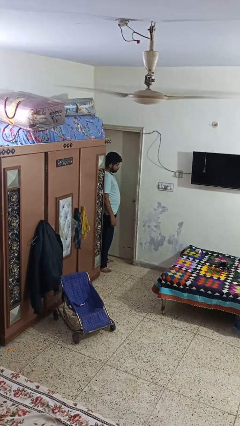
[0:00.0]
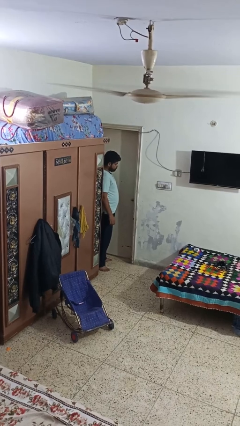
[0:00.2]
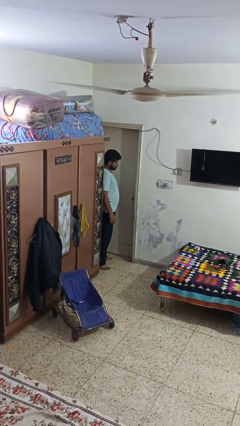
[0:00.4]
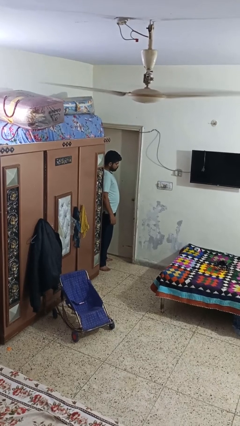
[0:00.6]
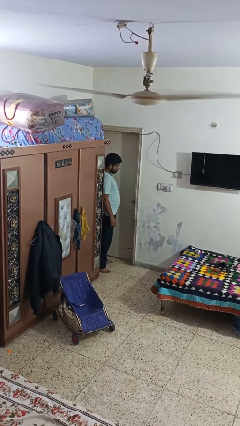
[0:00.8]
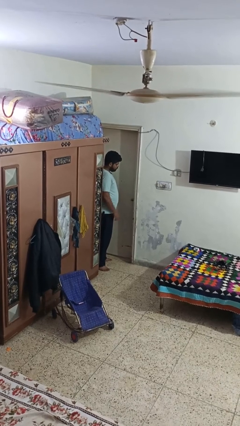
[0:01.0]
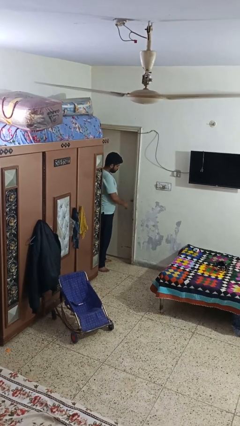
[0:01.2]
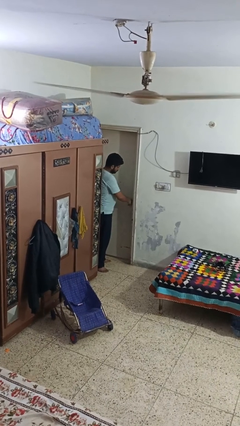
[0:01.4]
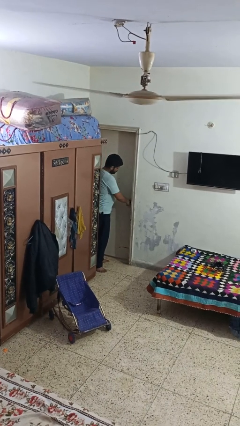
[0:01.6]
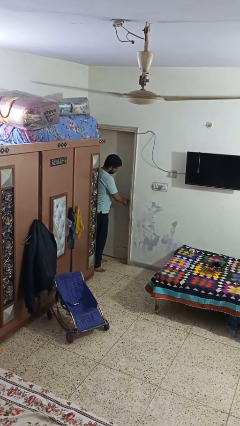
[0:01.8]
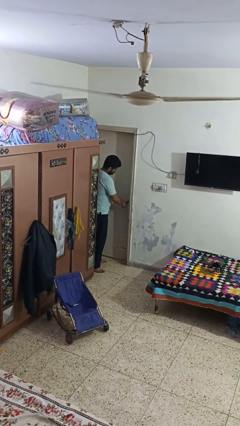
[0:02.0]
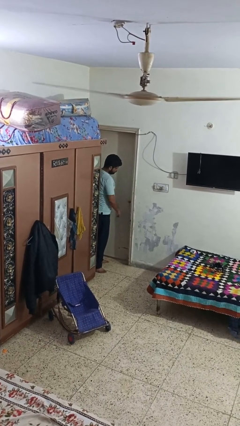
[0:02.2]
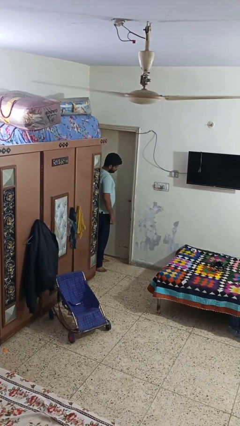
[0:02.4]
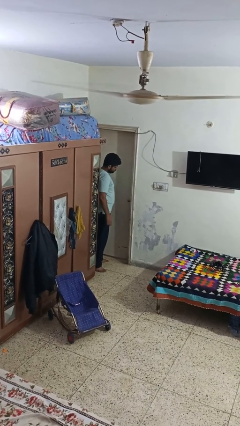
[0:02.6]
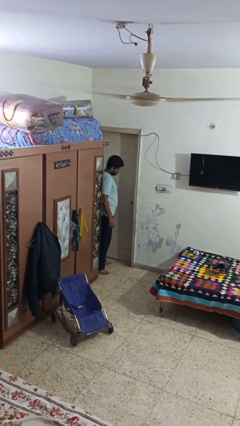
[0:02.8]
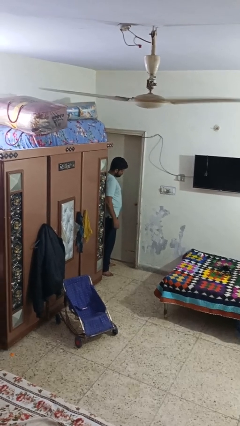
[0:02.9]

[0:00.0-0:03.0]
person unlocks door with keys

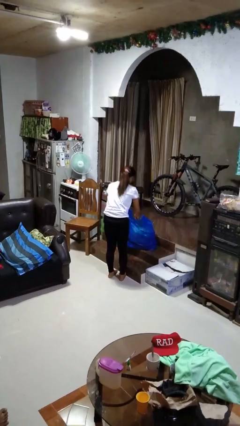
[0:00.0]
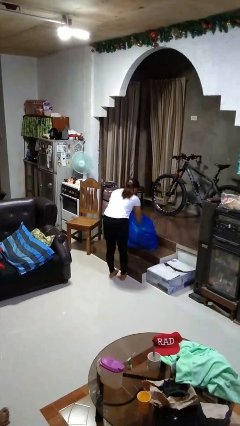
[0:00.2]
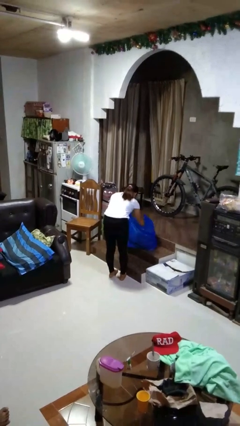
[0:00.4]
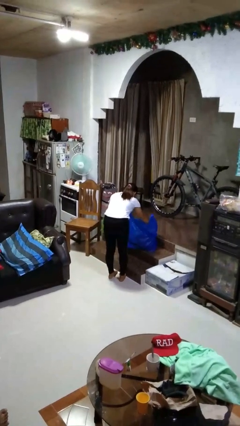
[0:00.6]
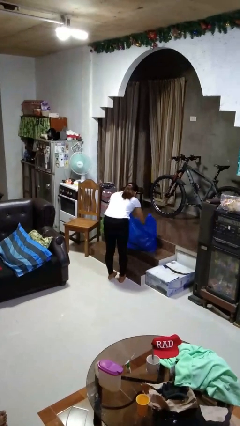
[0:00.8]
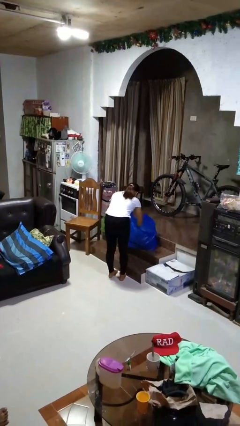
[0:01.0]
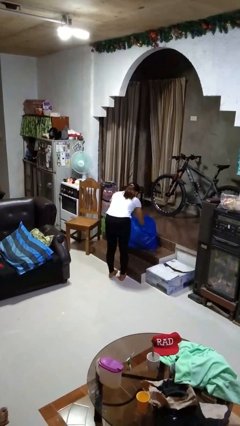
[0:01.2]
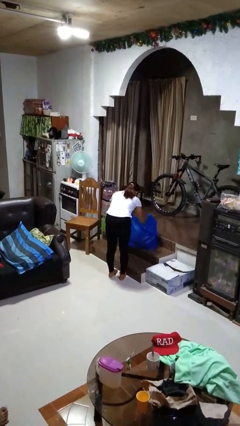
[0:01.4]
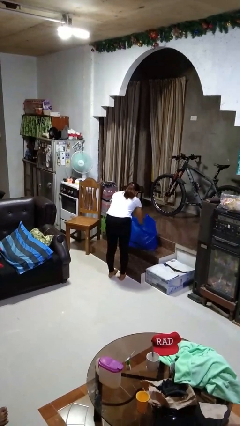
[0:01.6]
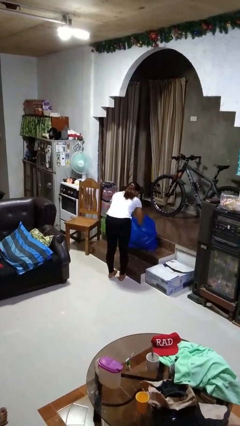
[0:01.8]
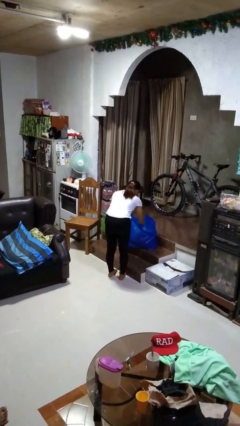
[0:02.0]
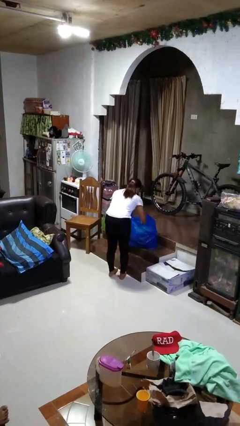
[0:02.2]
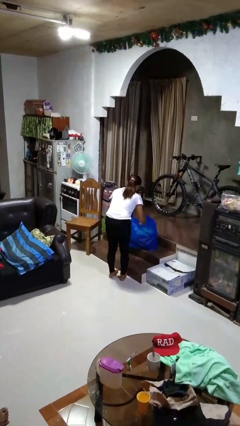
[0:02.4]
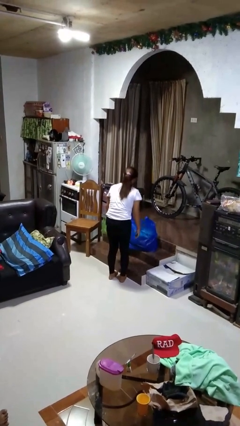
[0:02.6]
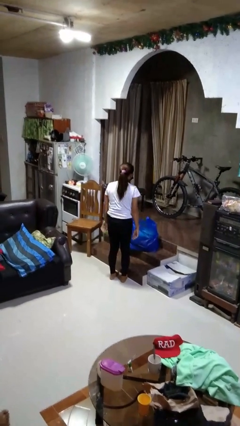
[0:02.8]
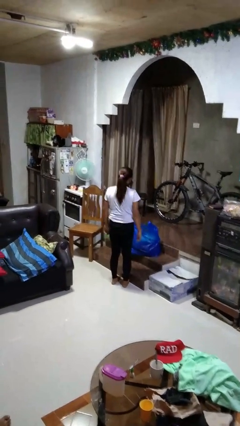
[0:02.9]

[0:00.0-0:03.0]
person searches in bag

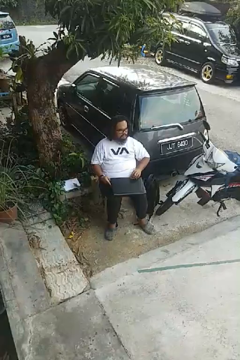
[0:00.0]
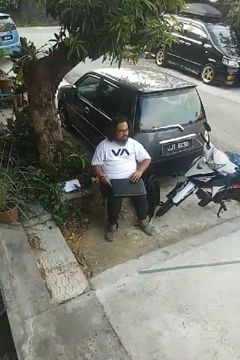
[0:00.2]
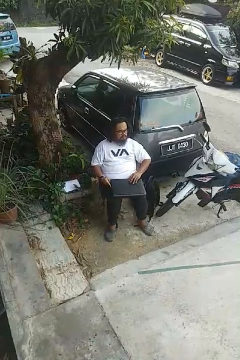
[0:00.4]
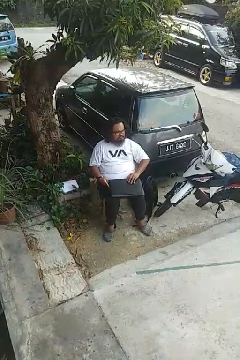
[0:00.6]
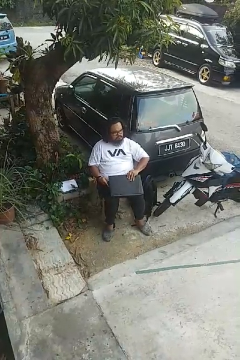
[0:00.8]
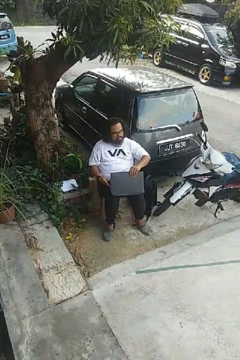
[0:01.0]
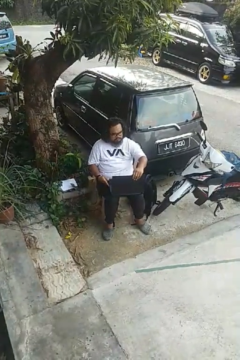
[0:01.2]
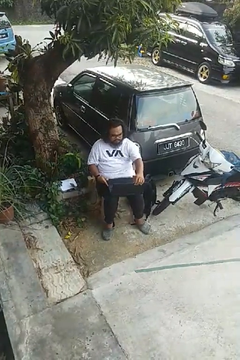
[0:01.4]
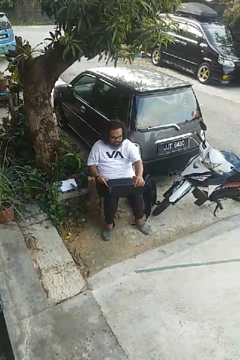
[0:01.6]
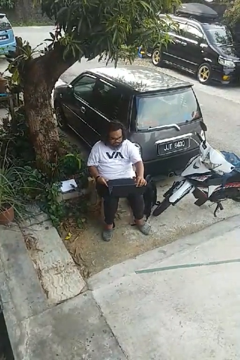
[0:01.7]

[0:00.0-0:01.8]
person opens laptop

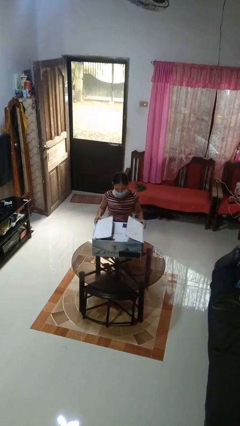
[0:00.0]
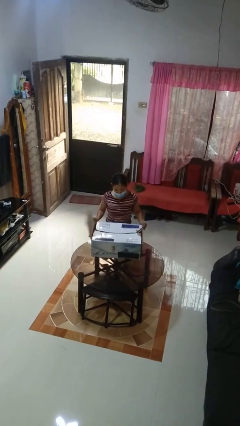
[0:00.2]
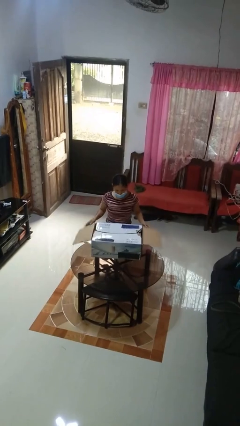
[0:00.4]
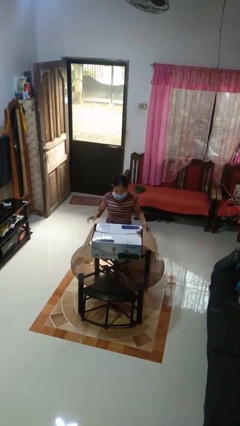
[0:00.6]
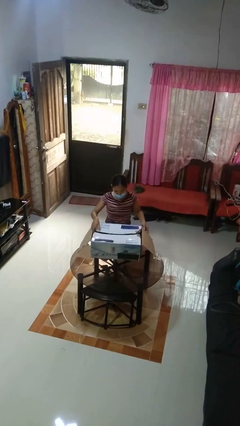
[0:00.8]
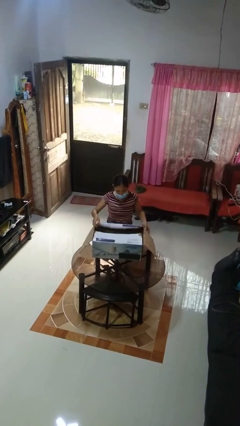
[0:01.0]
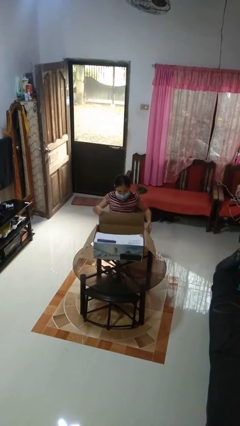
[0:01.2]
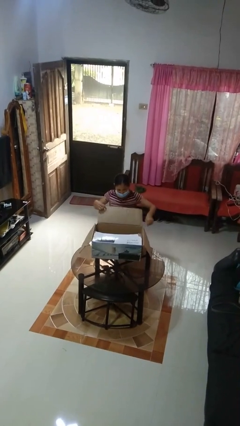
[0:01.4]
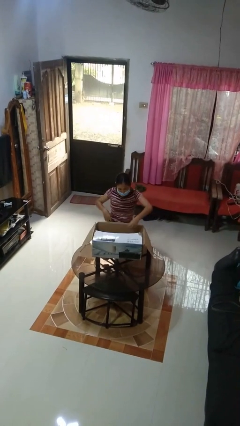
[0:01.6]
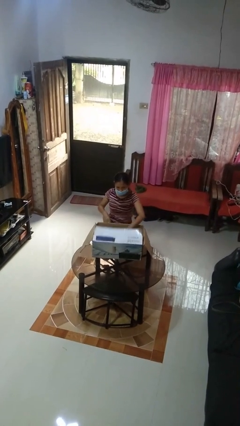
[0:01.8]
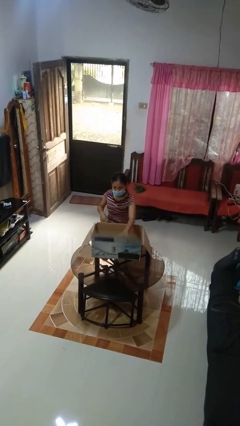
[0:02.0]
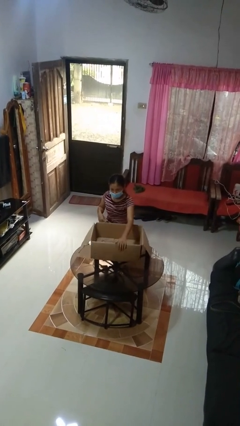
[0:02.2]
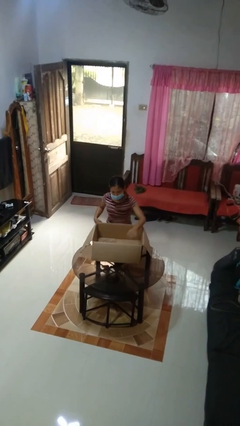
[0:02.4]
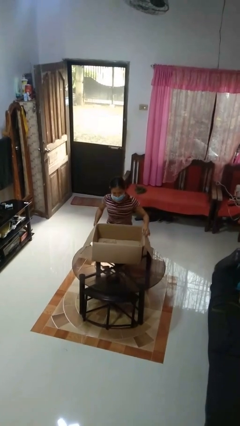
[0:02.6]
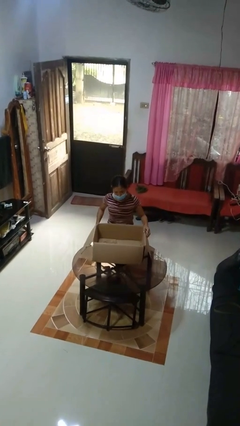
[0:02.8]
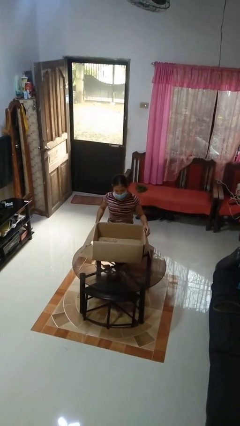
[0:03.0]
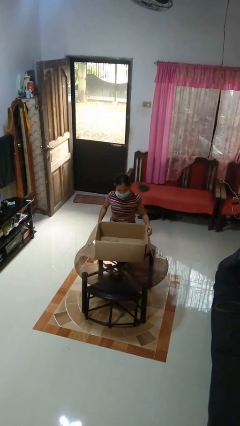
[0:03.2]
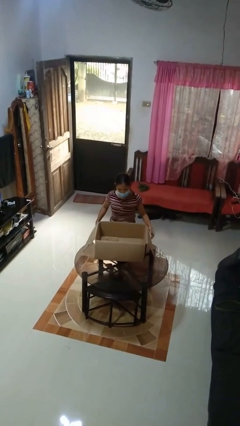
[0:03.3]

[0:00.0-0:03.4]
person opens box

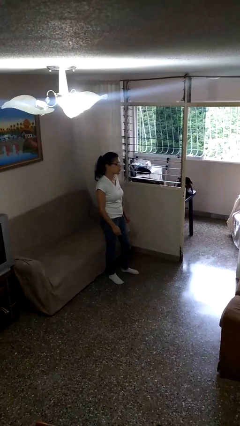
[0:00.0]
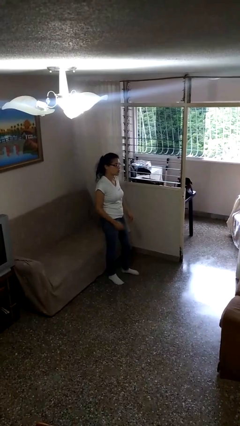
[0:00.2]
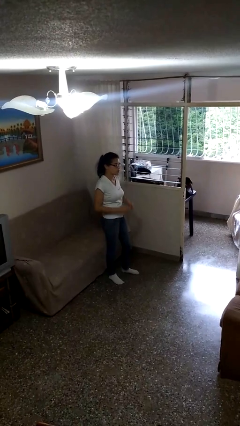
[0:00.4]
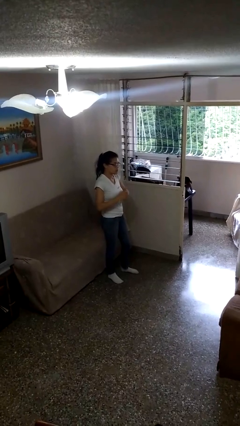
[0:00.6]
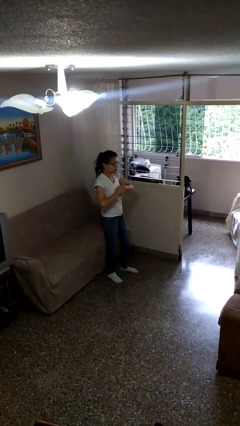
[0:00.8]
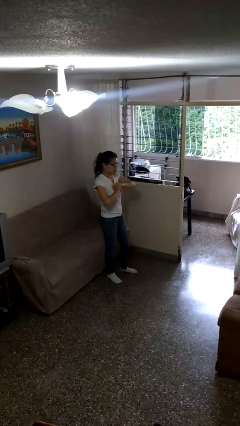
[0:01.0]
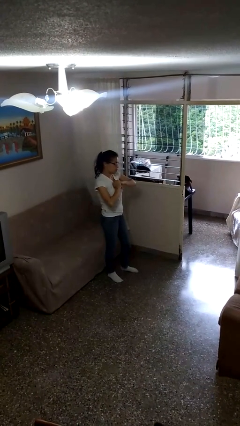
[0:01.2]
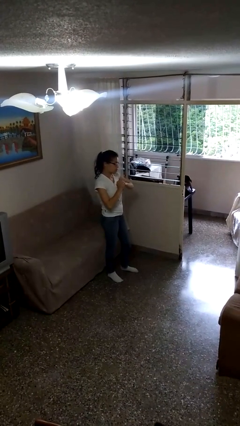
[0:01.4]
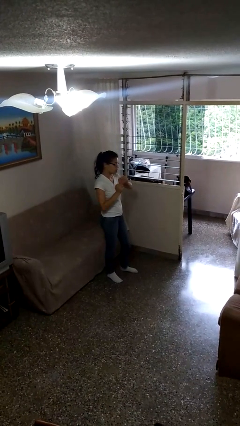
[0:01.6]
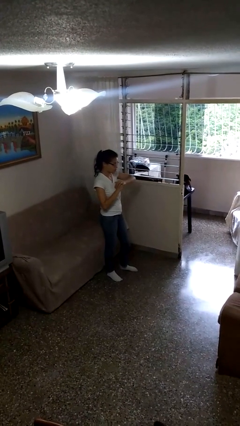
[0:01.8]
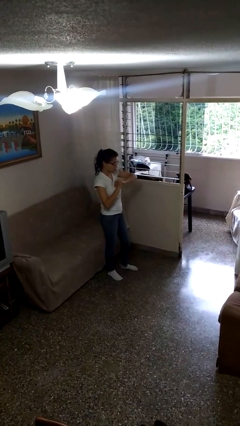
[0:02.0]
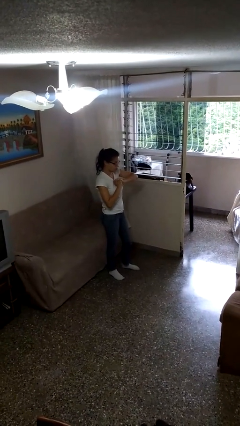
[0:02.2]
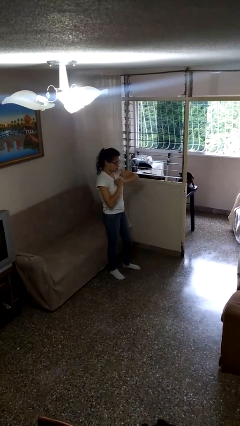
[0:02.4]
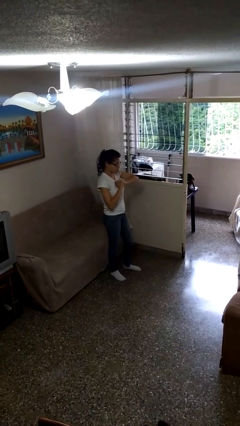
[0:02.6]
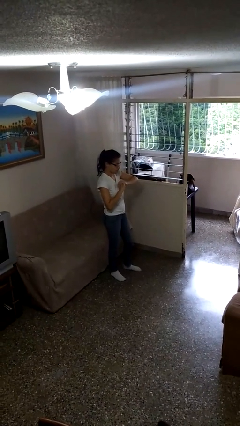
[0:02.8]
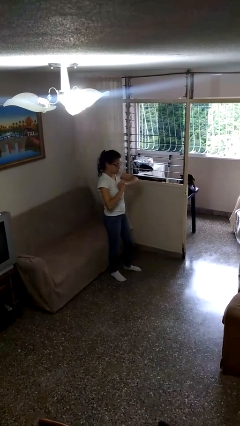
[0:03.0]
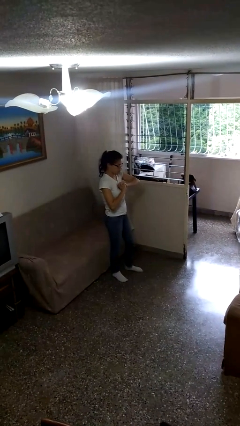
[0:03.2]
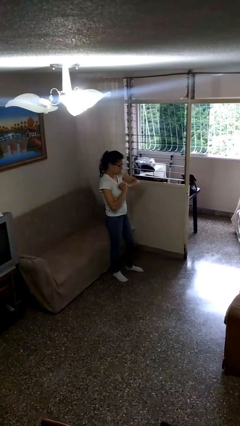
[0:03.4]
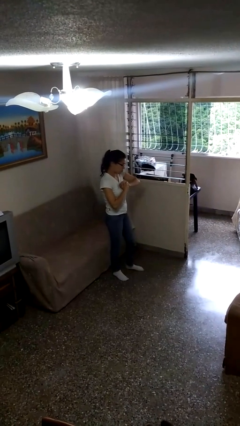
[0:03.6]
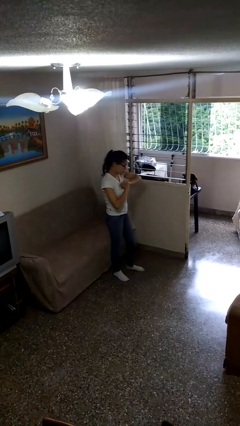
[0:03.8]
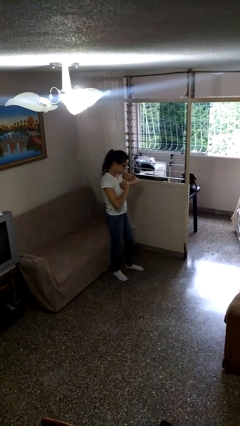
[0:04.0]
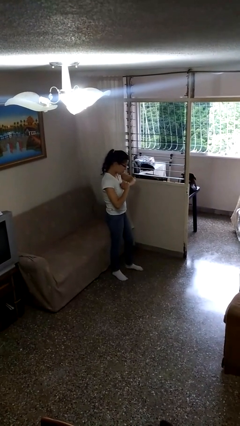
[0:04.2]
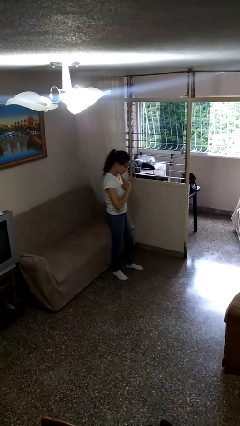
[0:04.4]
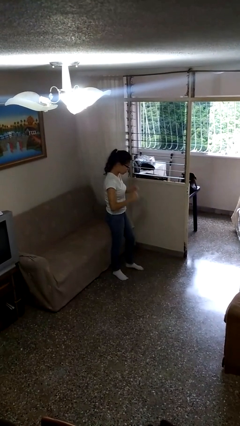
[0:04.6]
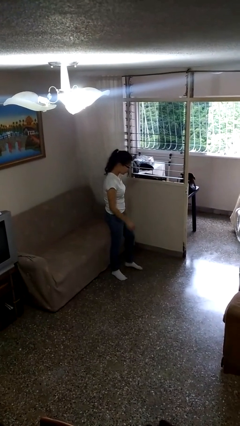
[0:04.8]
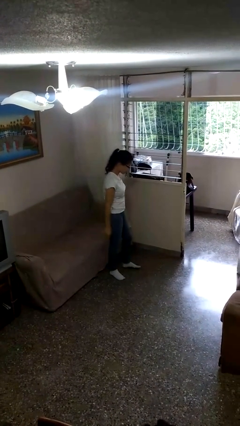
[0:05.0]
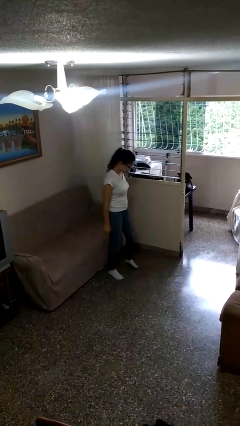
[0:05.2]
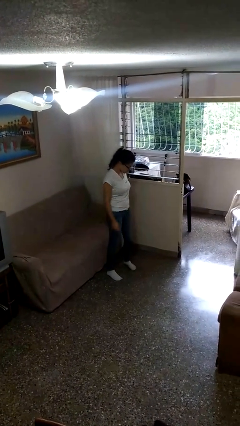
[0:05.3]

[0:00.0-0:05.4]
person cracks knuckles

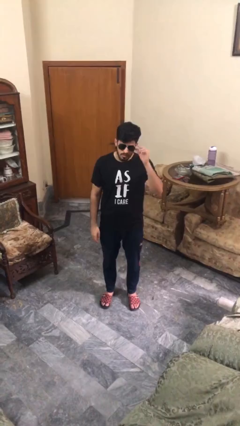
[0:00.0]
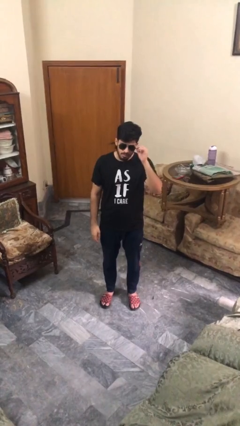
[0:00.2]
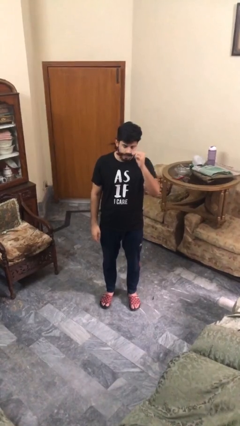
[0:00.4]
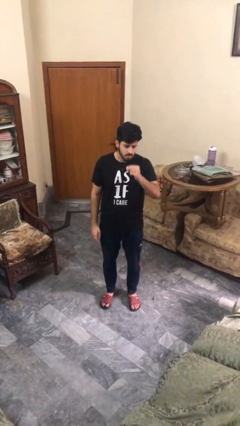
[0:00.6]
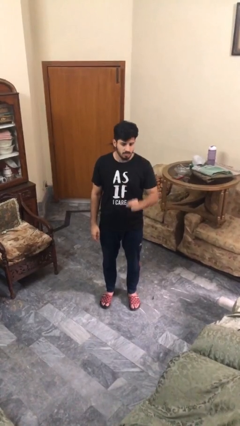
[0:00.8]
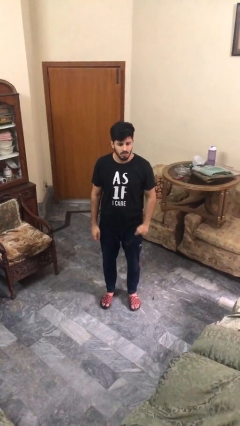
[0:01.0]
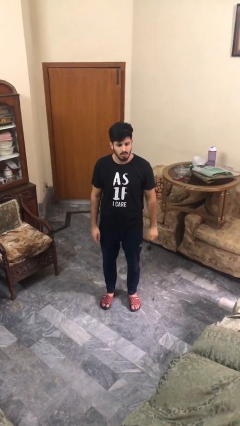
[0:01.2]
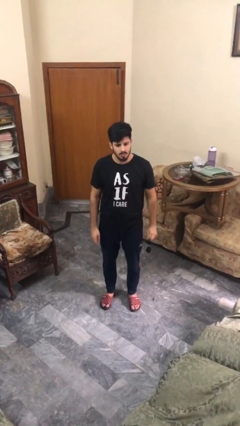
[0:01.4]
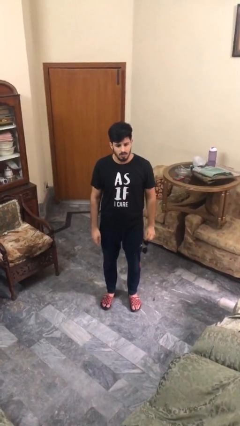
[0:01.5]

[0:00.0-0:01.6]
person takes off sunglasses
